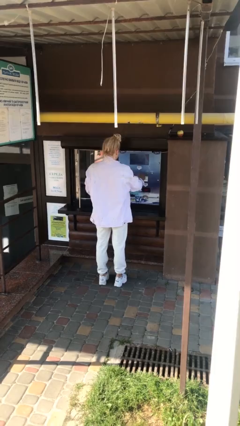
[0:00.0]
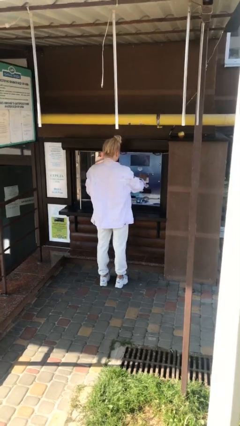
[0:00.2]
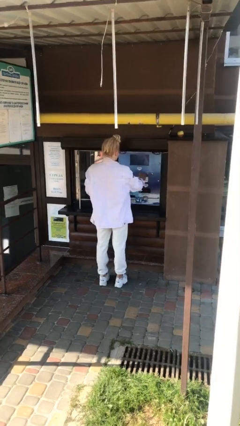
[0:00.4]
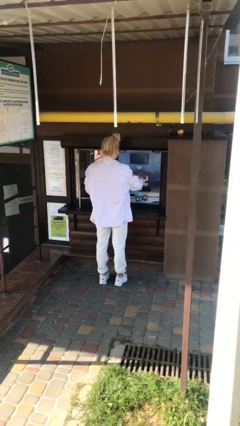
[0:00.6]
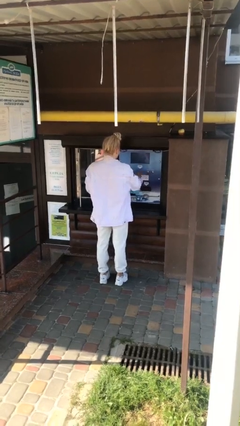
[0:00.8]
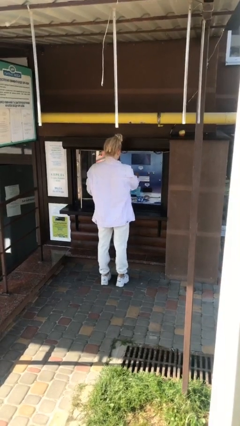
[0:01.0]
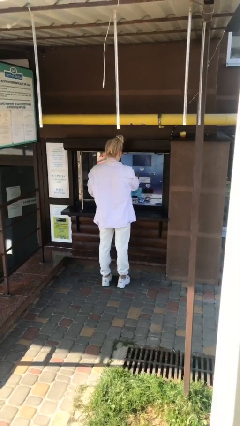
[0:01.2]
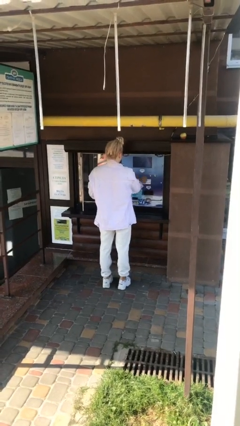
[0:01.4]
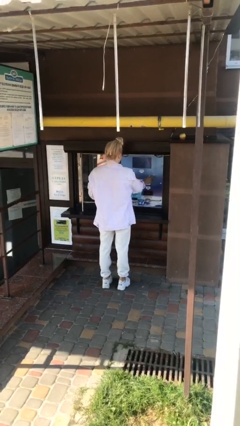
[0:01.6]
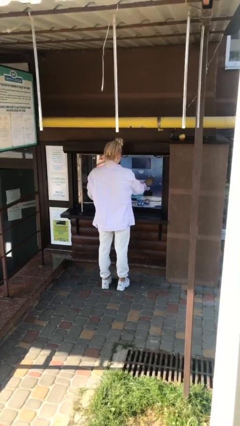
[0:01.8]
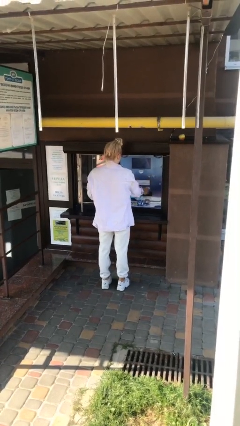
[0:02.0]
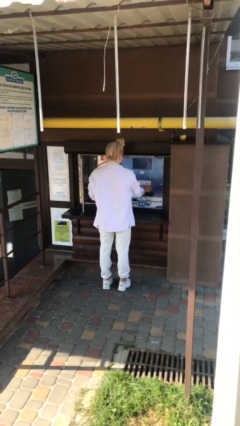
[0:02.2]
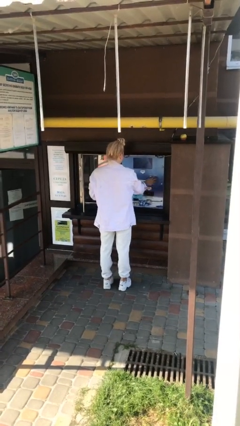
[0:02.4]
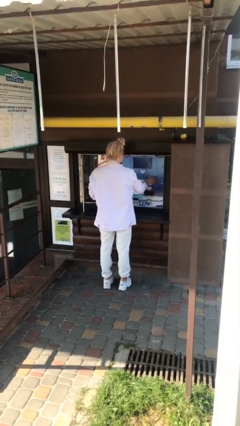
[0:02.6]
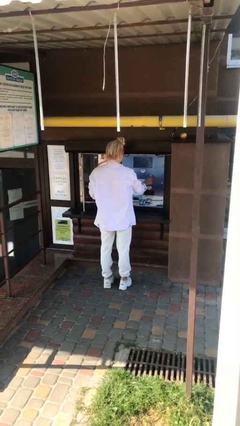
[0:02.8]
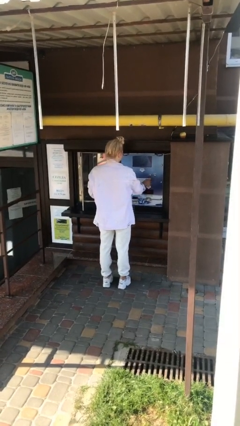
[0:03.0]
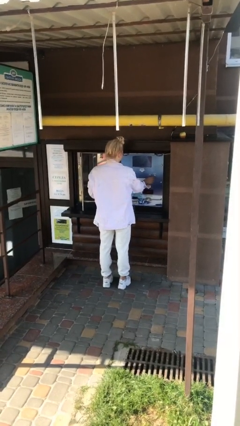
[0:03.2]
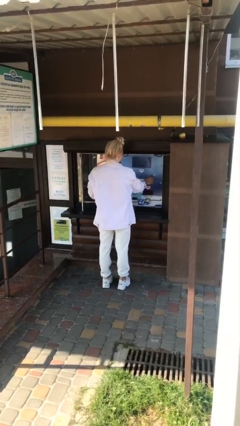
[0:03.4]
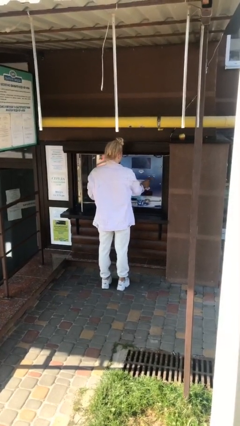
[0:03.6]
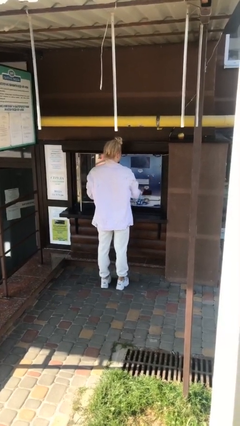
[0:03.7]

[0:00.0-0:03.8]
person purchases from machine

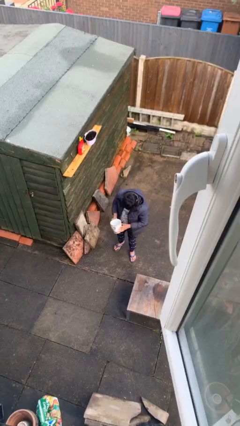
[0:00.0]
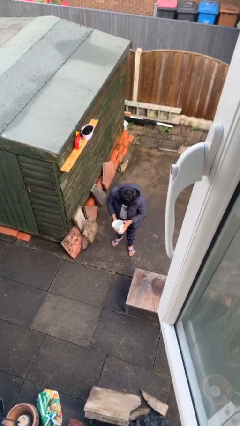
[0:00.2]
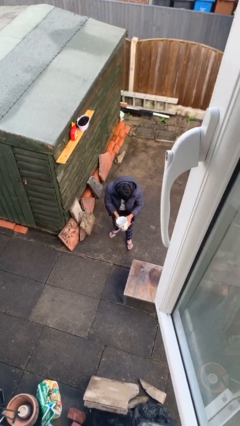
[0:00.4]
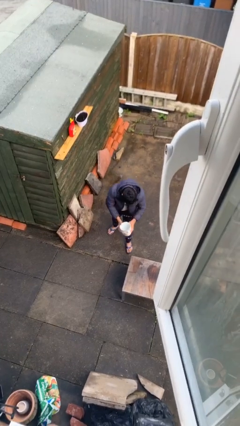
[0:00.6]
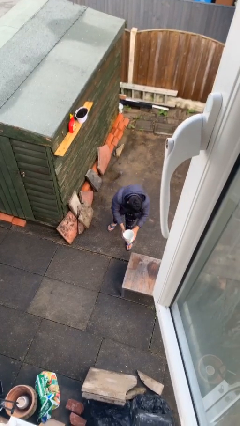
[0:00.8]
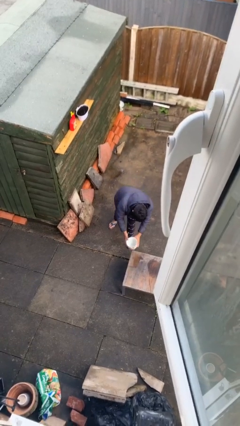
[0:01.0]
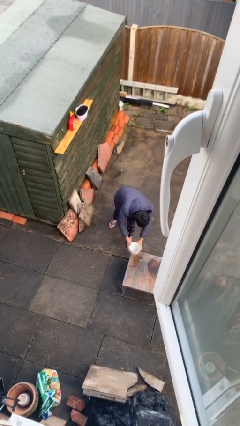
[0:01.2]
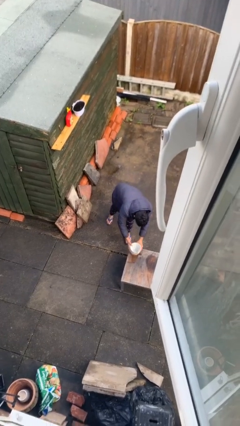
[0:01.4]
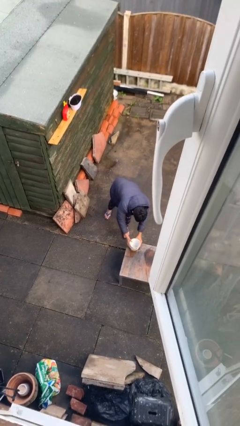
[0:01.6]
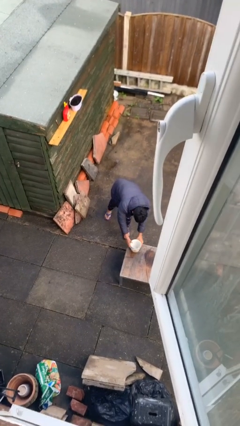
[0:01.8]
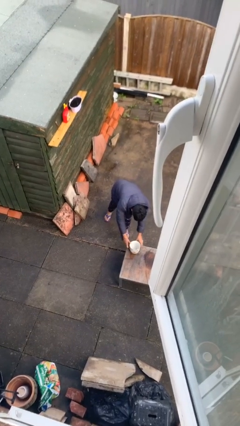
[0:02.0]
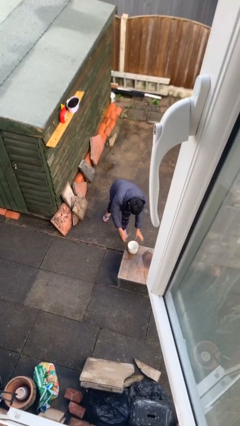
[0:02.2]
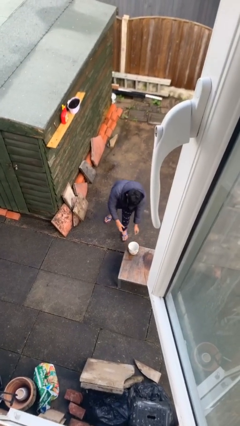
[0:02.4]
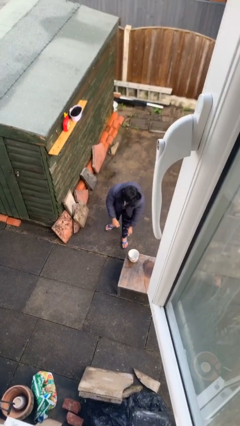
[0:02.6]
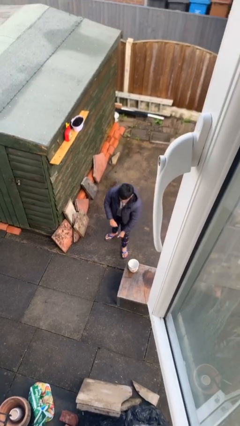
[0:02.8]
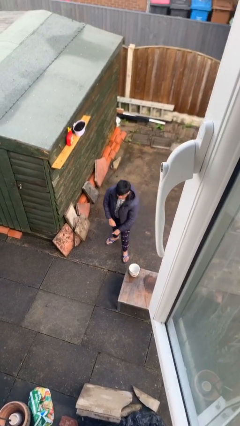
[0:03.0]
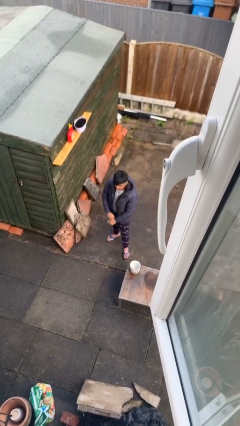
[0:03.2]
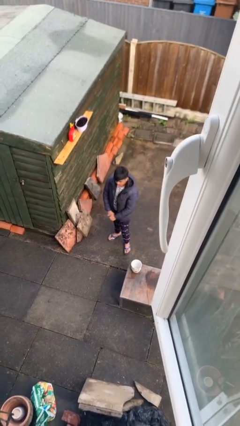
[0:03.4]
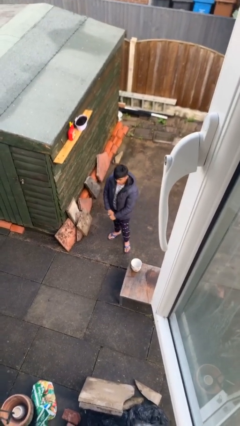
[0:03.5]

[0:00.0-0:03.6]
person puts down object on table

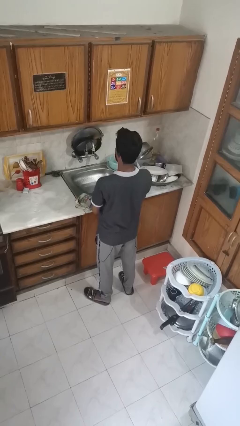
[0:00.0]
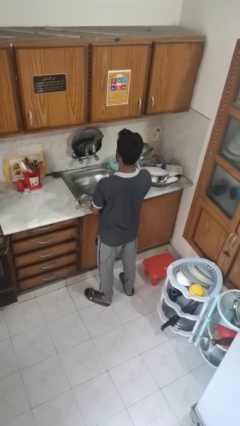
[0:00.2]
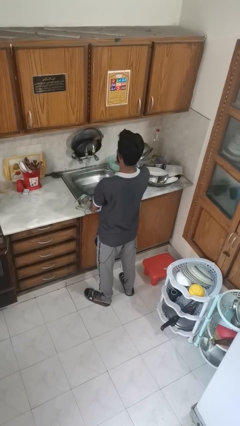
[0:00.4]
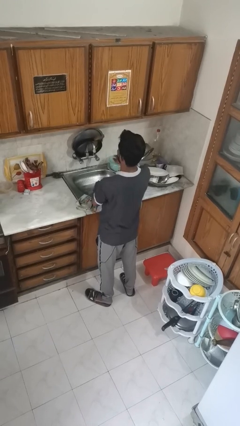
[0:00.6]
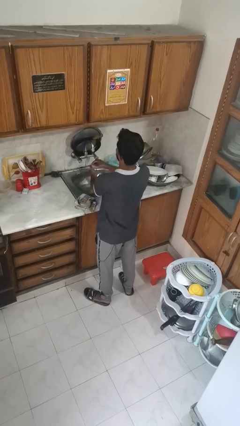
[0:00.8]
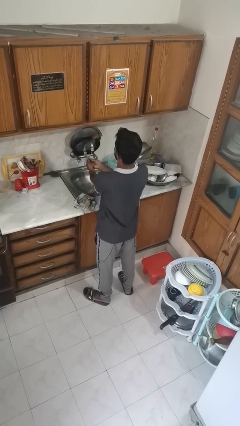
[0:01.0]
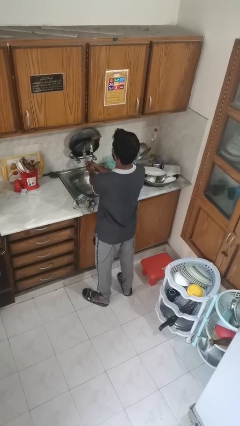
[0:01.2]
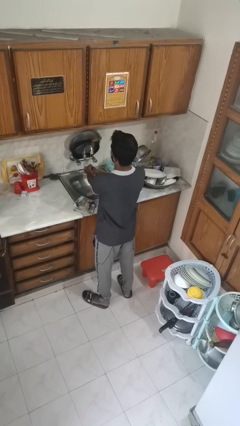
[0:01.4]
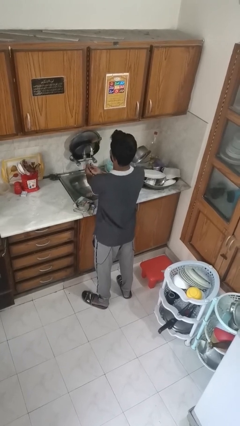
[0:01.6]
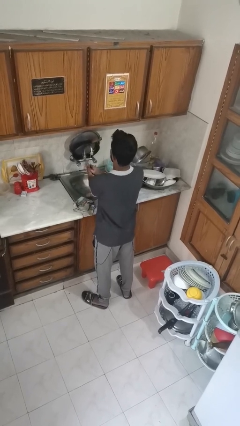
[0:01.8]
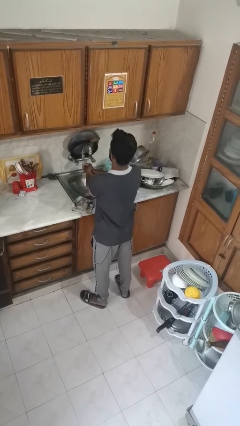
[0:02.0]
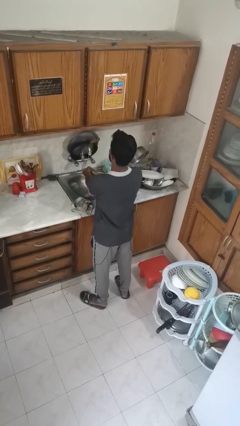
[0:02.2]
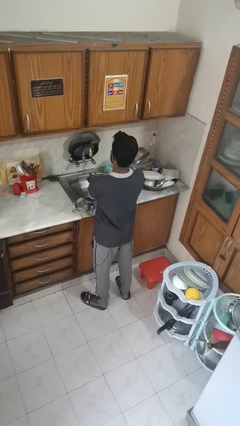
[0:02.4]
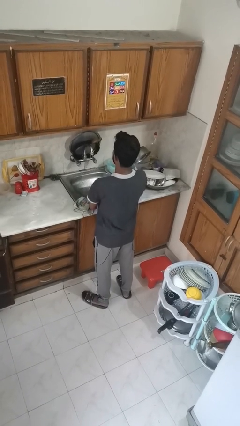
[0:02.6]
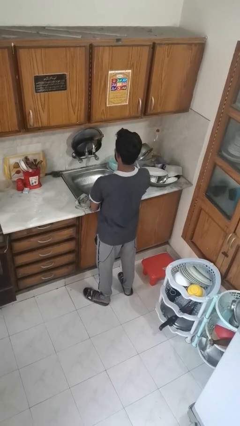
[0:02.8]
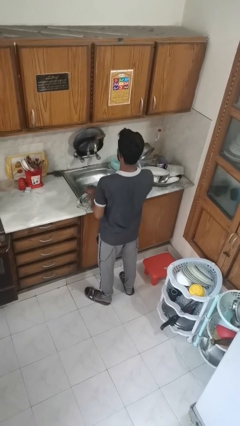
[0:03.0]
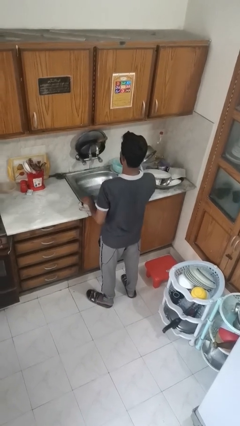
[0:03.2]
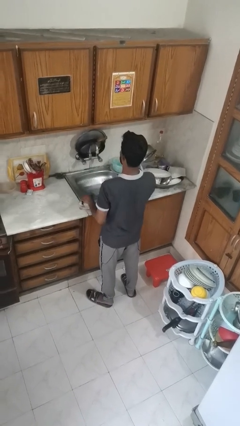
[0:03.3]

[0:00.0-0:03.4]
person washes hands

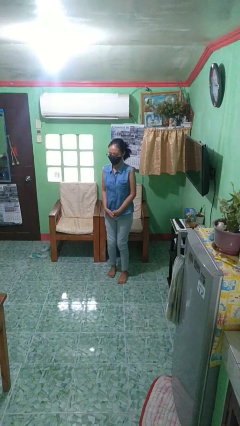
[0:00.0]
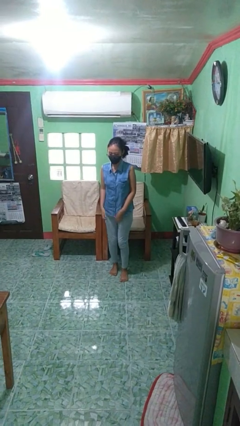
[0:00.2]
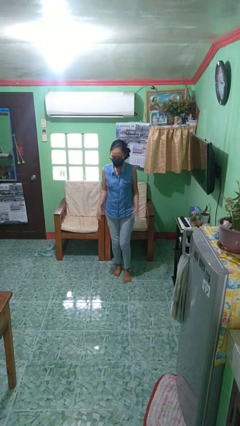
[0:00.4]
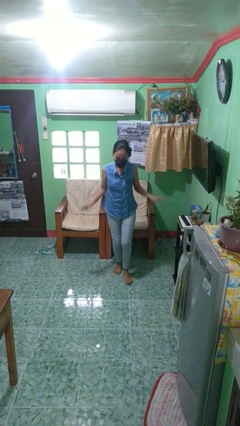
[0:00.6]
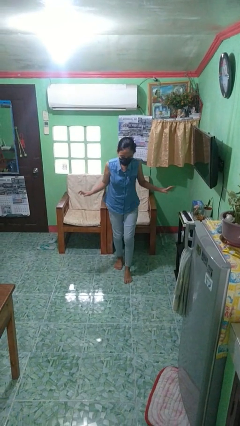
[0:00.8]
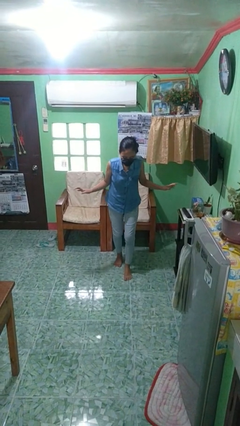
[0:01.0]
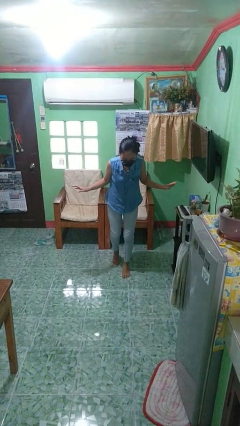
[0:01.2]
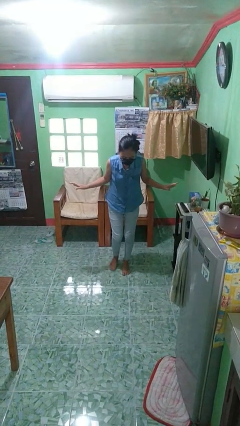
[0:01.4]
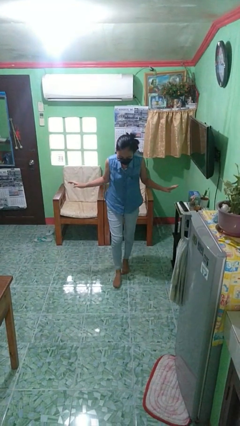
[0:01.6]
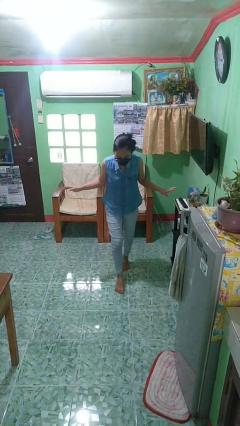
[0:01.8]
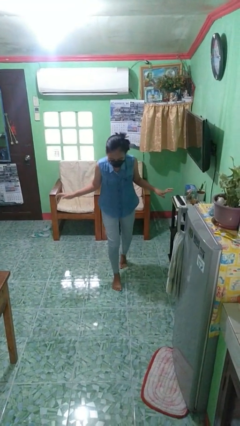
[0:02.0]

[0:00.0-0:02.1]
person walks tiptoe

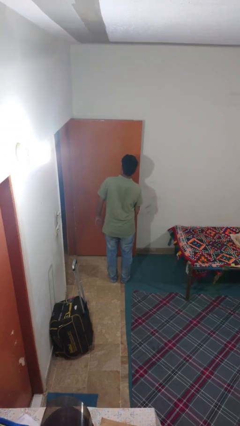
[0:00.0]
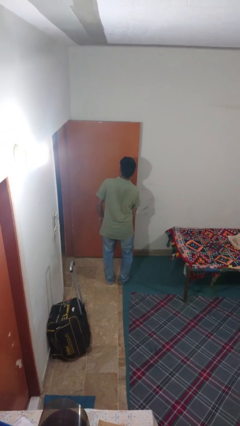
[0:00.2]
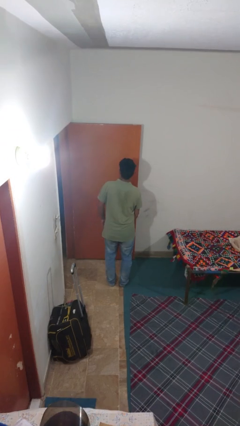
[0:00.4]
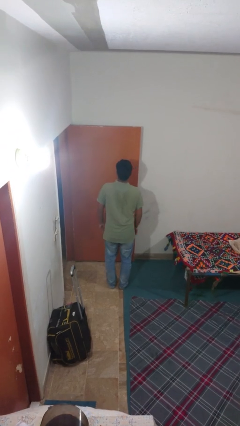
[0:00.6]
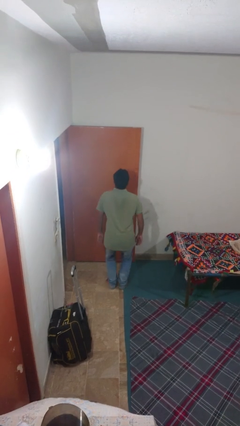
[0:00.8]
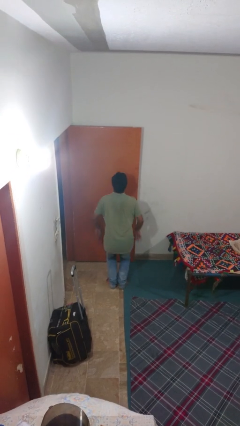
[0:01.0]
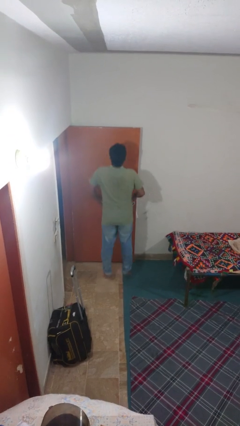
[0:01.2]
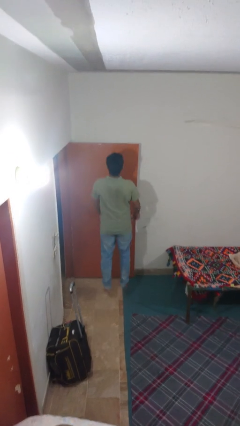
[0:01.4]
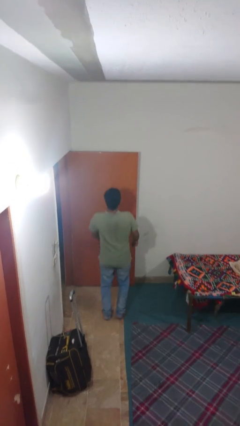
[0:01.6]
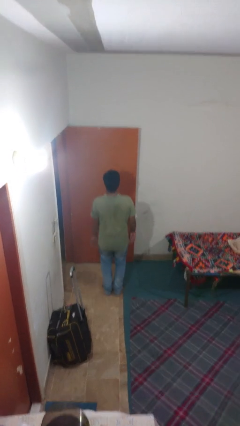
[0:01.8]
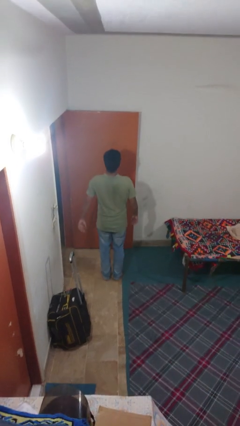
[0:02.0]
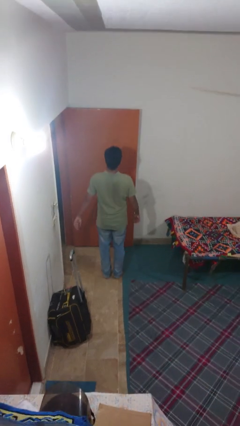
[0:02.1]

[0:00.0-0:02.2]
person jumps

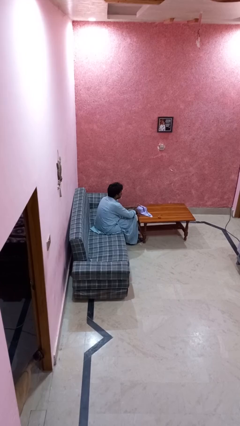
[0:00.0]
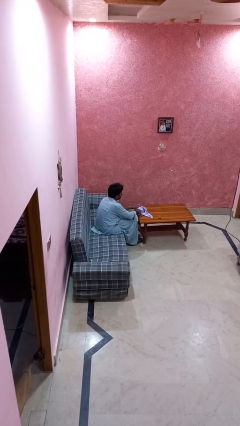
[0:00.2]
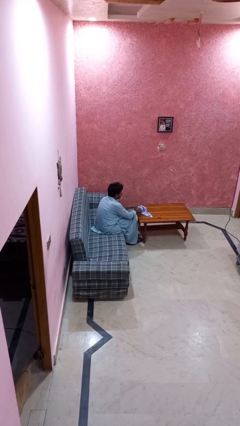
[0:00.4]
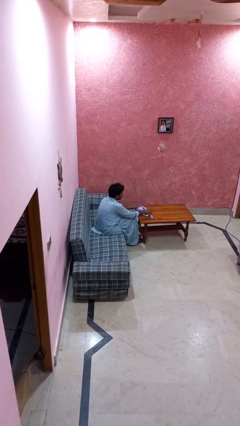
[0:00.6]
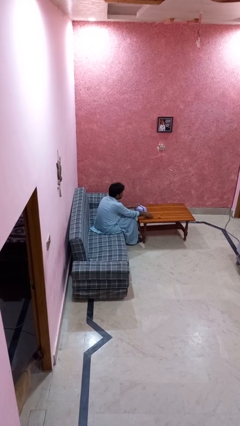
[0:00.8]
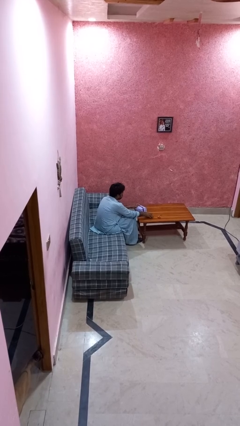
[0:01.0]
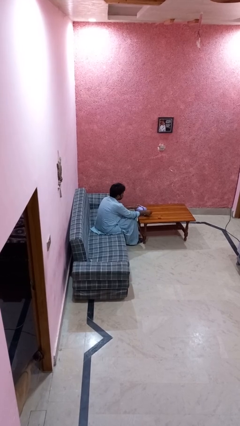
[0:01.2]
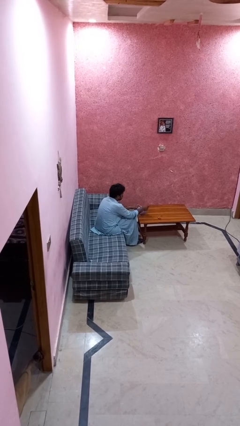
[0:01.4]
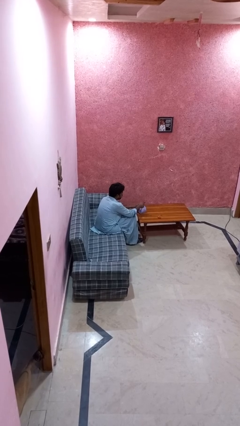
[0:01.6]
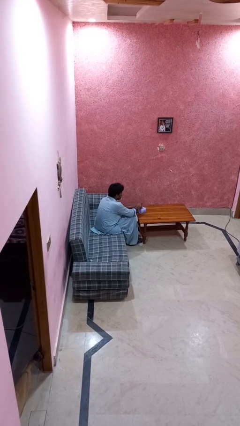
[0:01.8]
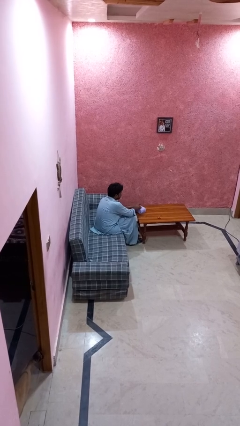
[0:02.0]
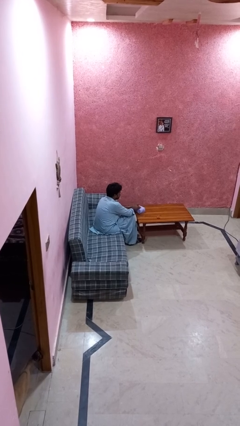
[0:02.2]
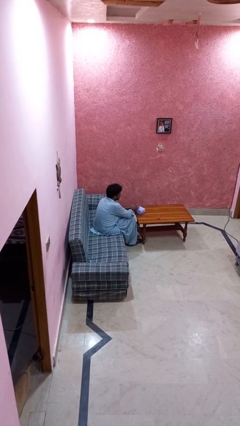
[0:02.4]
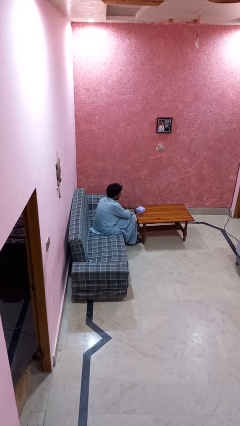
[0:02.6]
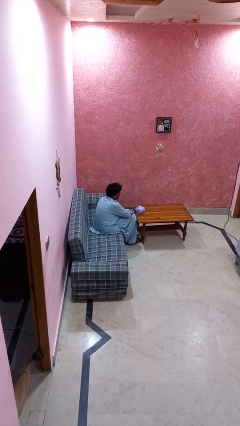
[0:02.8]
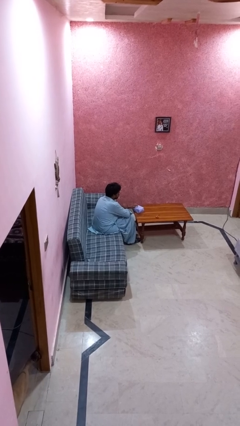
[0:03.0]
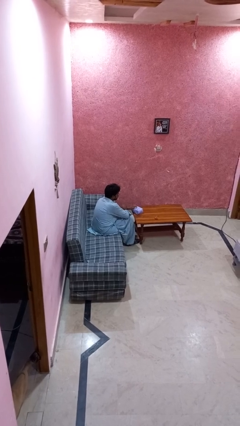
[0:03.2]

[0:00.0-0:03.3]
person wraps box
